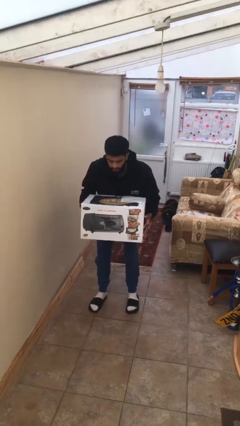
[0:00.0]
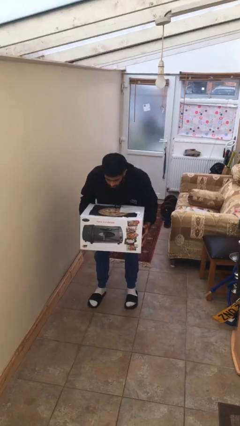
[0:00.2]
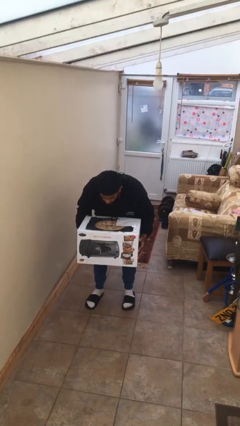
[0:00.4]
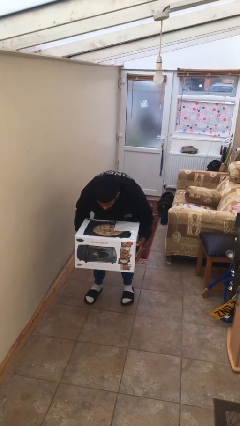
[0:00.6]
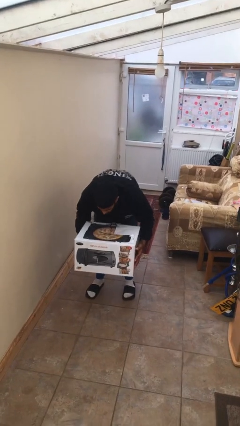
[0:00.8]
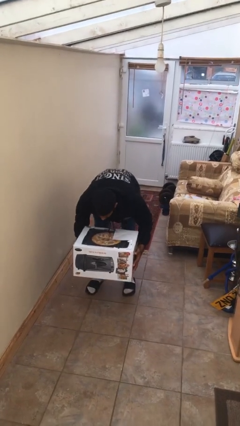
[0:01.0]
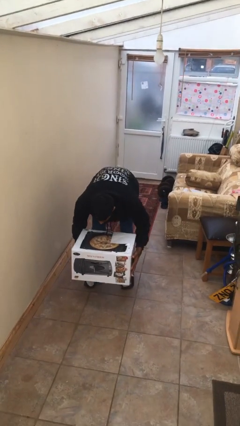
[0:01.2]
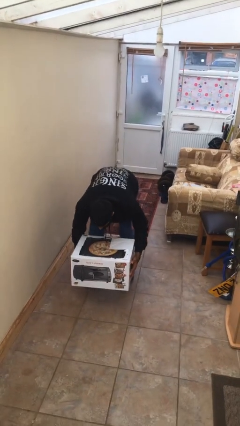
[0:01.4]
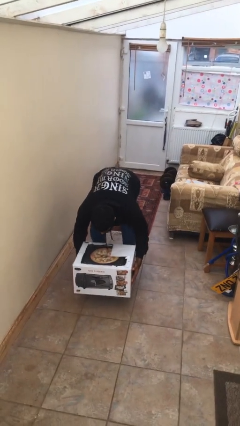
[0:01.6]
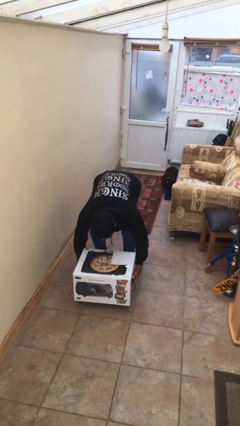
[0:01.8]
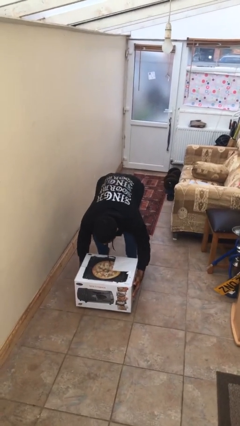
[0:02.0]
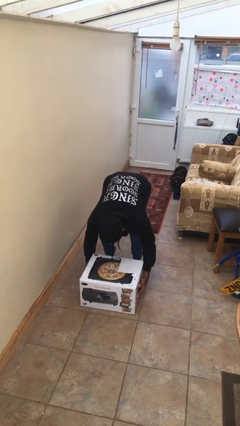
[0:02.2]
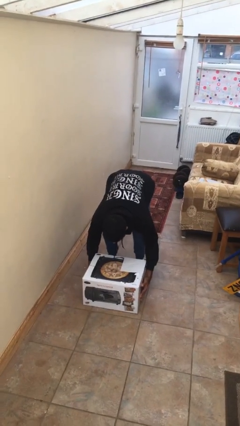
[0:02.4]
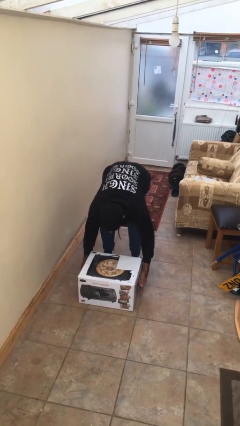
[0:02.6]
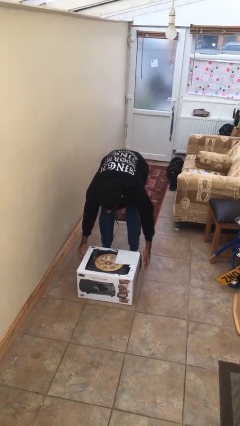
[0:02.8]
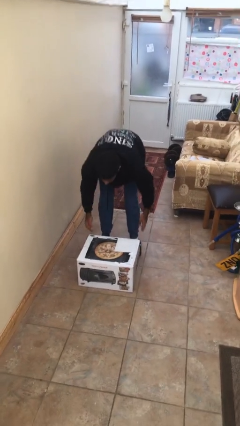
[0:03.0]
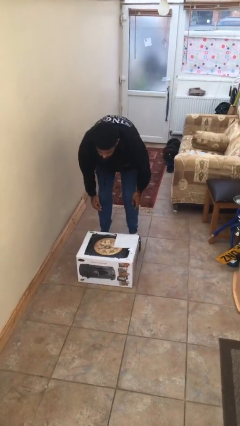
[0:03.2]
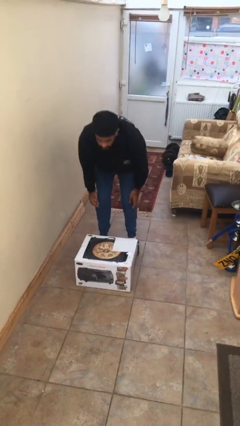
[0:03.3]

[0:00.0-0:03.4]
person puts down object on floor

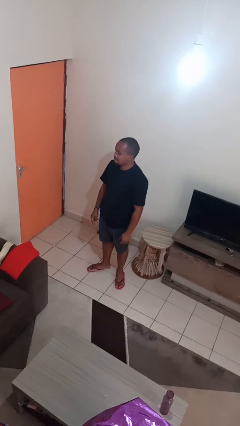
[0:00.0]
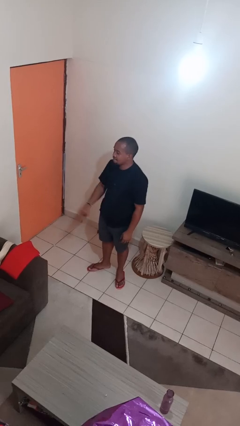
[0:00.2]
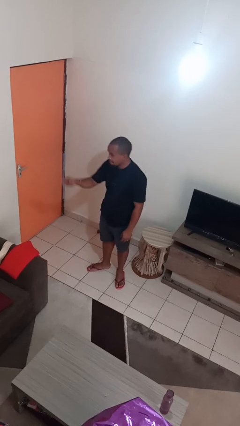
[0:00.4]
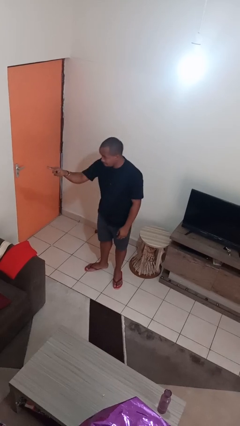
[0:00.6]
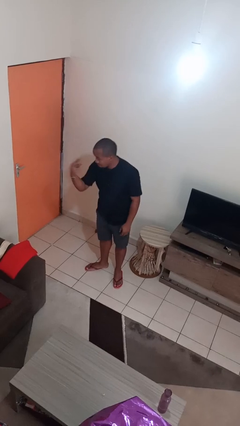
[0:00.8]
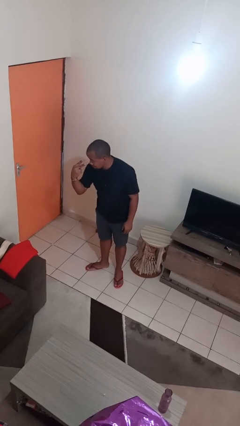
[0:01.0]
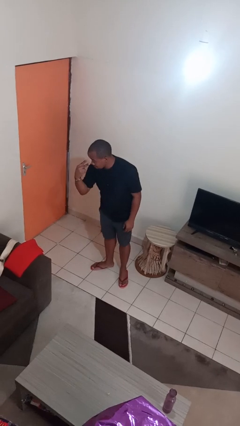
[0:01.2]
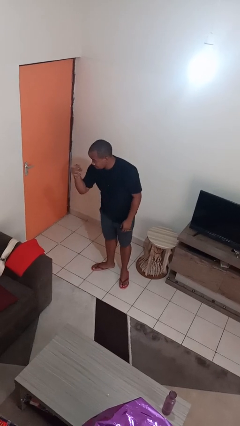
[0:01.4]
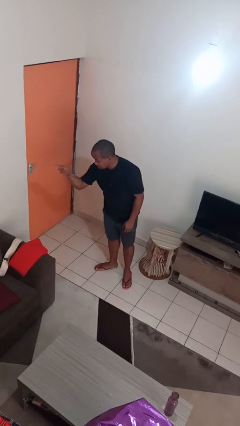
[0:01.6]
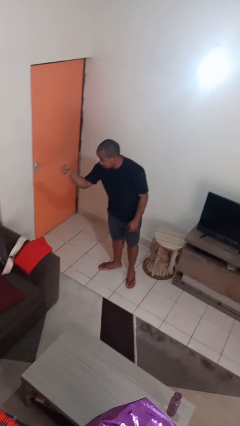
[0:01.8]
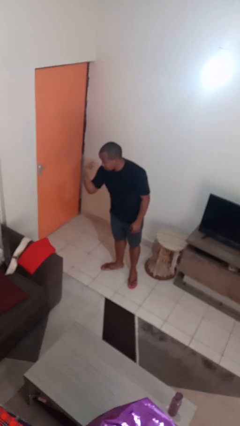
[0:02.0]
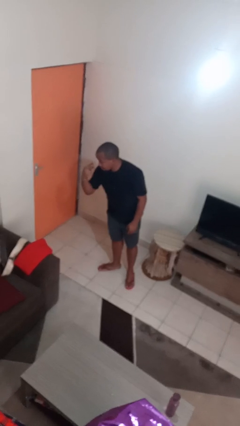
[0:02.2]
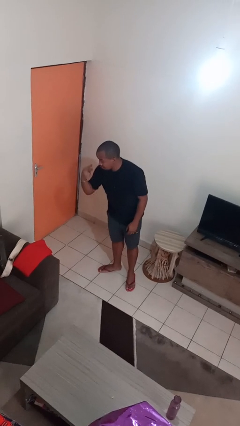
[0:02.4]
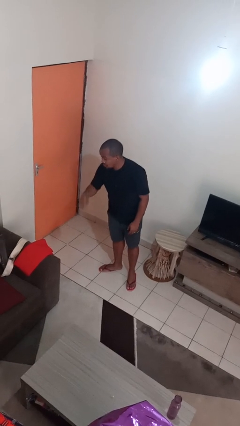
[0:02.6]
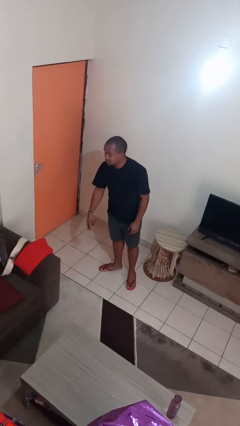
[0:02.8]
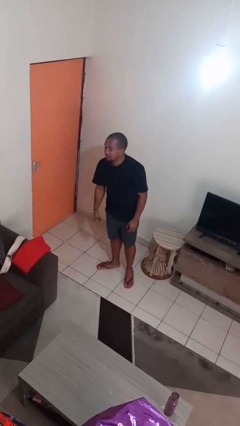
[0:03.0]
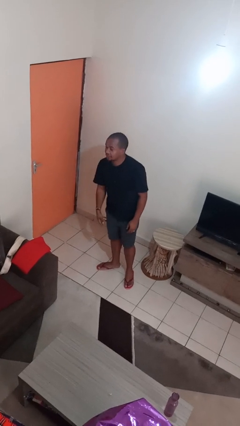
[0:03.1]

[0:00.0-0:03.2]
person gestures watch closely

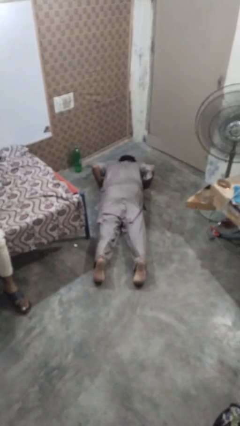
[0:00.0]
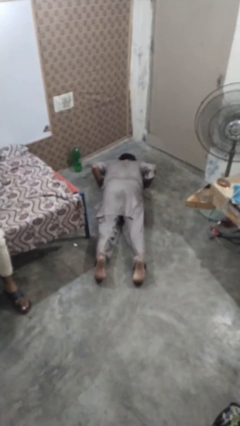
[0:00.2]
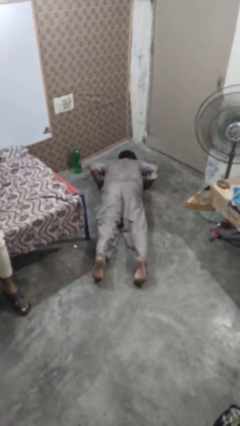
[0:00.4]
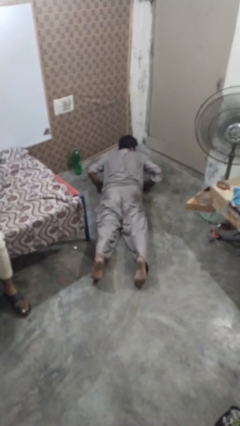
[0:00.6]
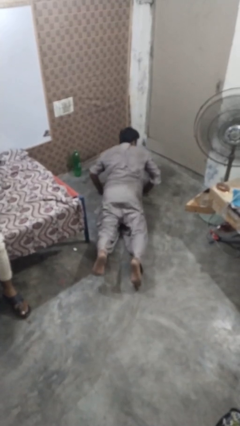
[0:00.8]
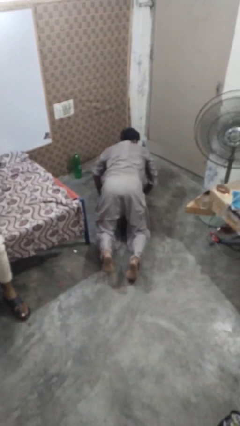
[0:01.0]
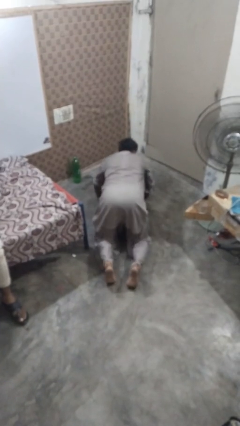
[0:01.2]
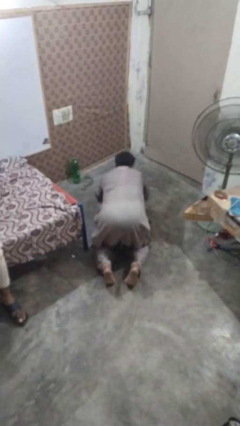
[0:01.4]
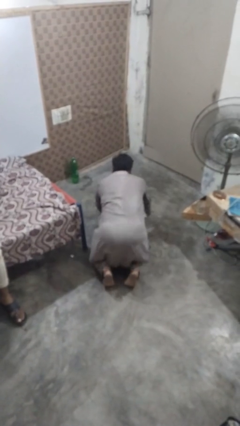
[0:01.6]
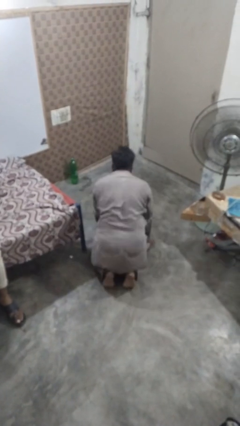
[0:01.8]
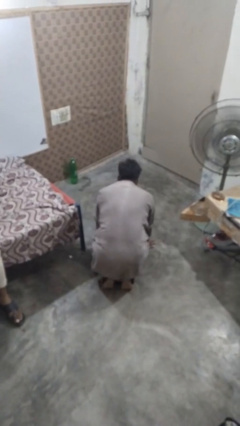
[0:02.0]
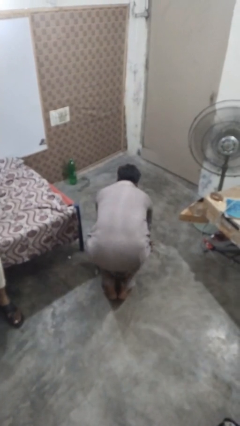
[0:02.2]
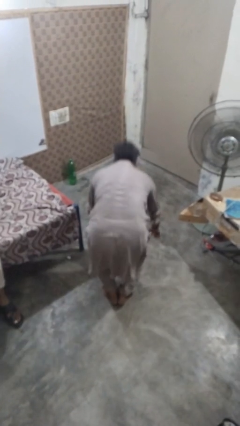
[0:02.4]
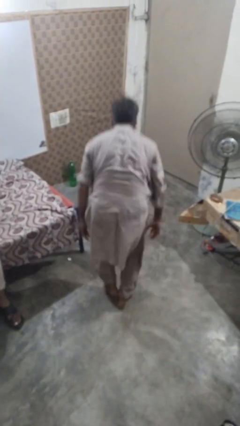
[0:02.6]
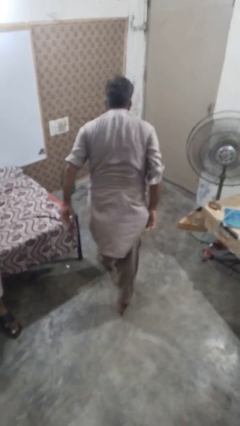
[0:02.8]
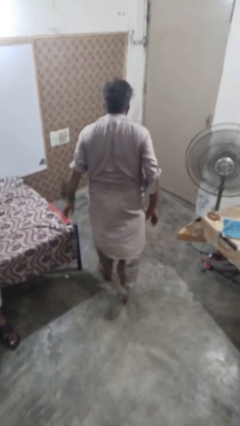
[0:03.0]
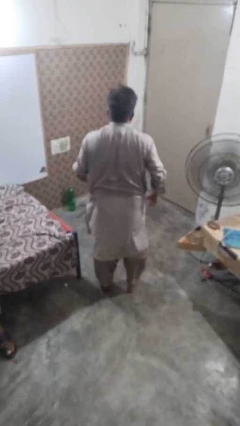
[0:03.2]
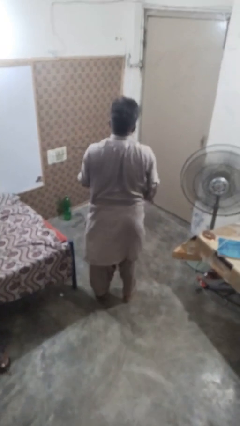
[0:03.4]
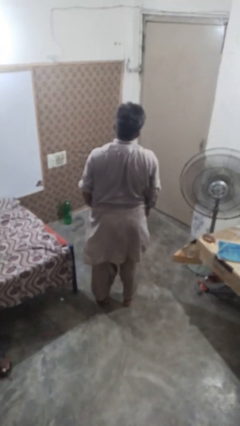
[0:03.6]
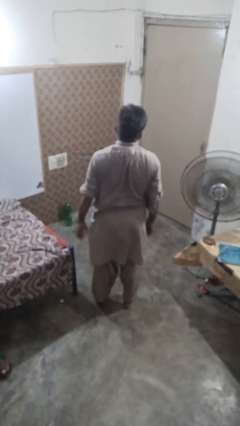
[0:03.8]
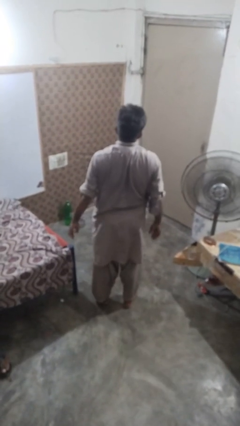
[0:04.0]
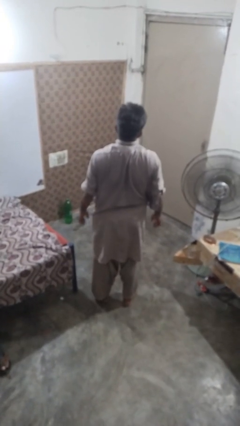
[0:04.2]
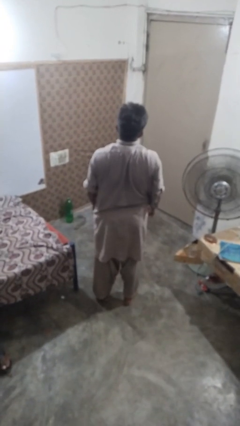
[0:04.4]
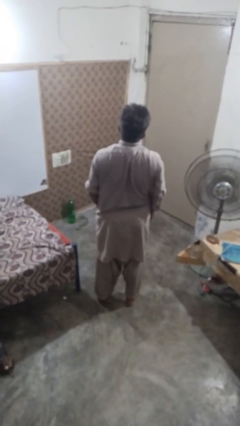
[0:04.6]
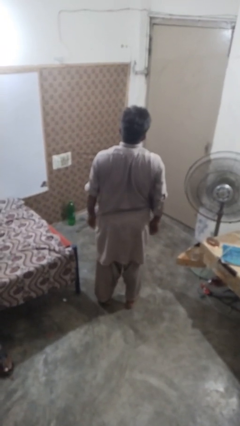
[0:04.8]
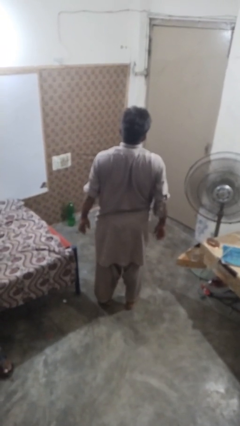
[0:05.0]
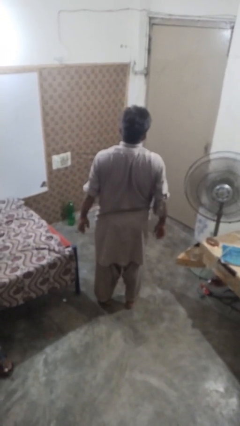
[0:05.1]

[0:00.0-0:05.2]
person stands up from floor

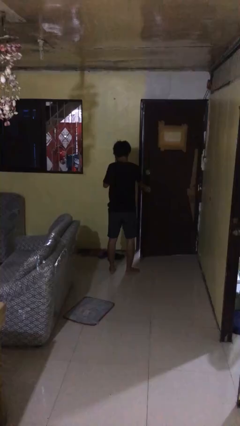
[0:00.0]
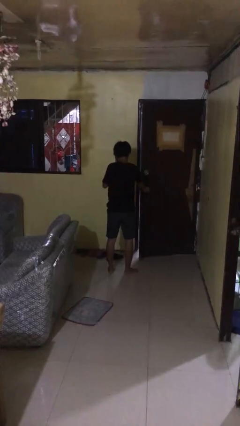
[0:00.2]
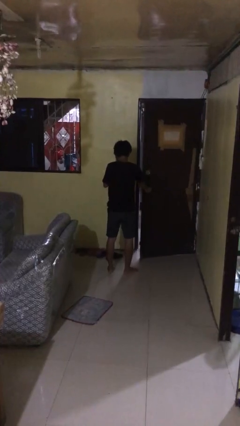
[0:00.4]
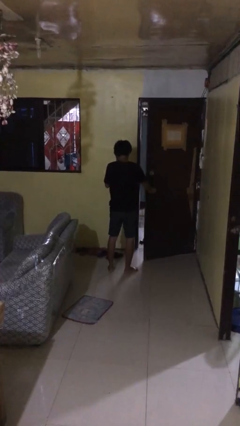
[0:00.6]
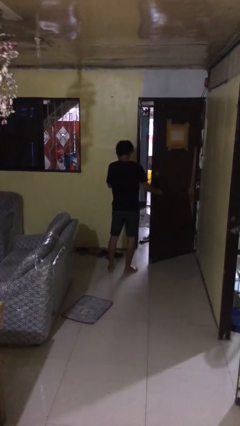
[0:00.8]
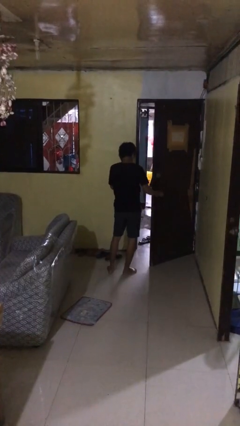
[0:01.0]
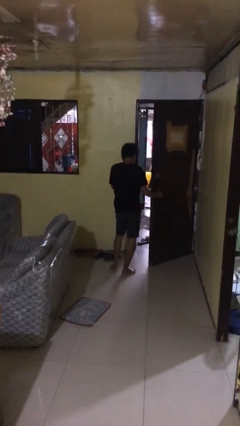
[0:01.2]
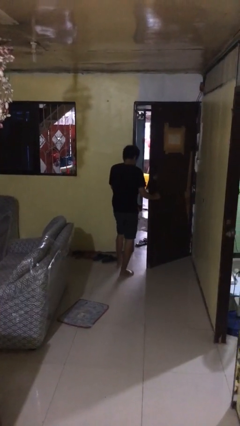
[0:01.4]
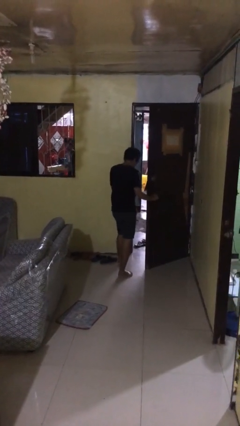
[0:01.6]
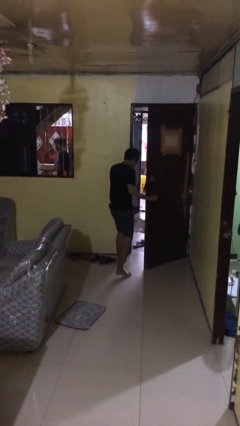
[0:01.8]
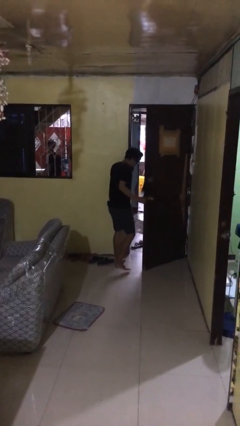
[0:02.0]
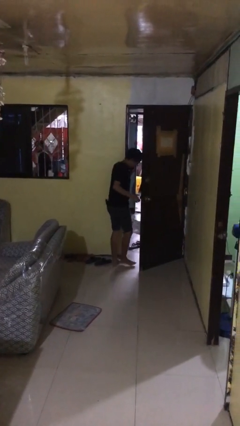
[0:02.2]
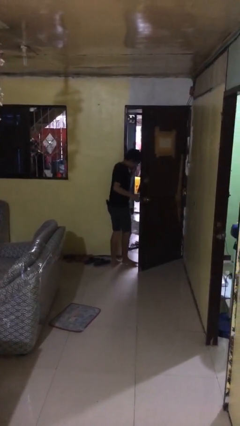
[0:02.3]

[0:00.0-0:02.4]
person opens facility door

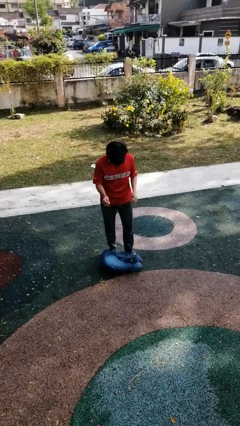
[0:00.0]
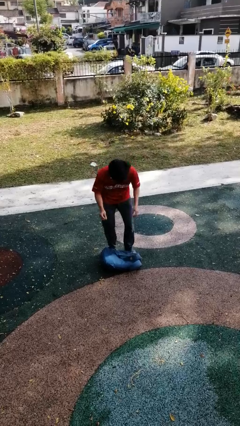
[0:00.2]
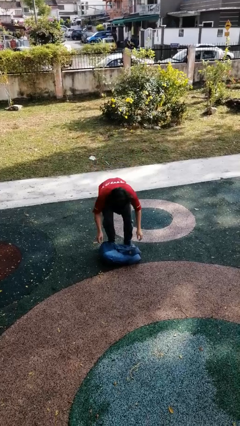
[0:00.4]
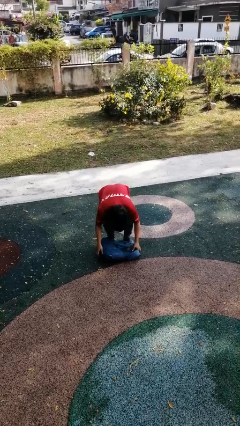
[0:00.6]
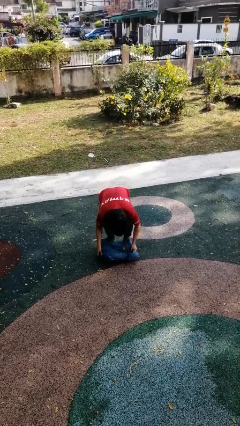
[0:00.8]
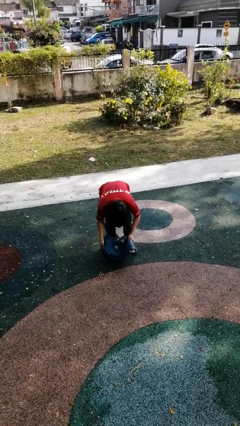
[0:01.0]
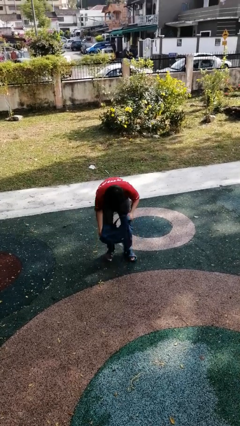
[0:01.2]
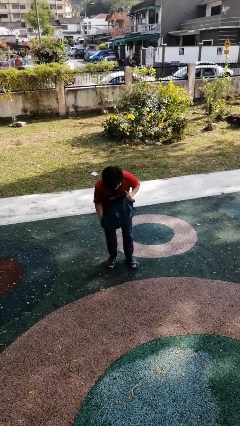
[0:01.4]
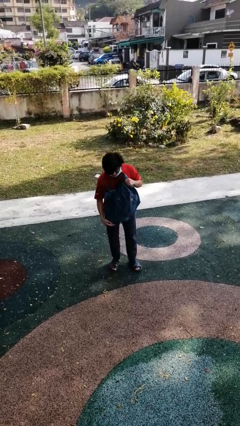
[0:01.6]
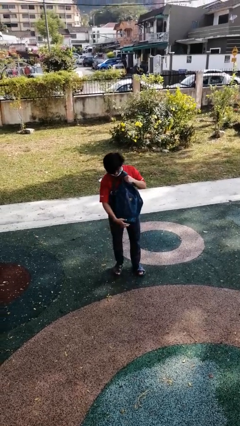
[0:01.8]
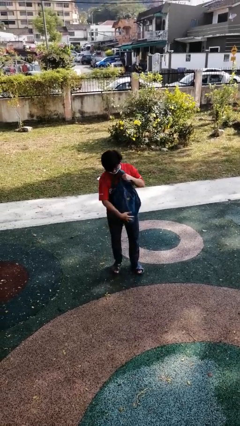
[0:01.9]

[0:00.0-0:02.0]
person picks up object from floor

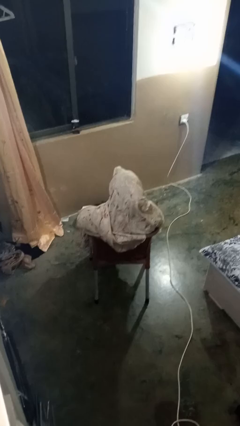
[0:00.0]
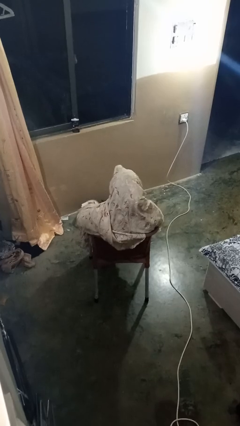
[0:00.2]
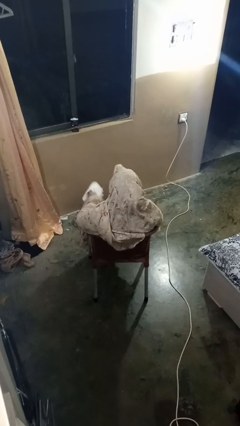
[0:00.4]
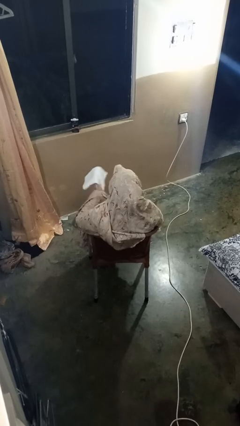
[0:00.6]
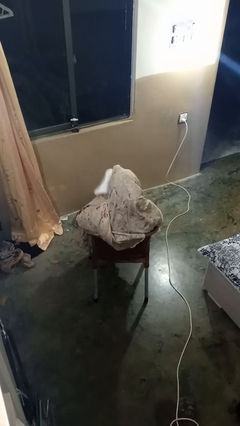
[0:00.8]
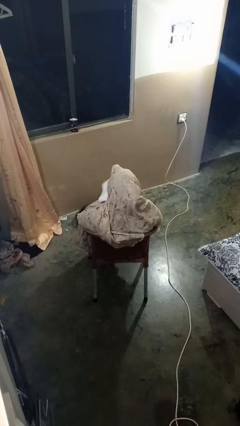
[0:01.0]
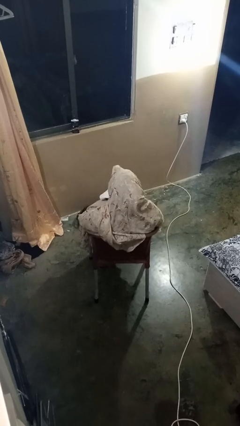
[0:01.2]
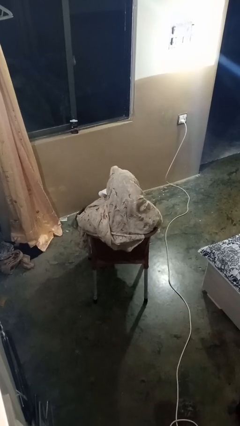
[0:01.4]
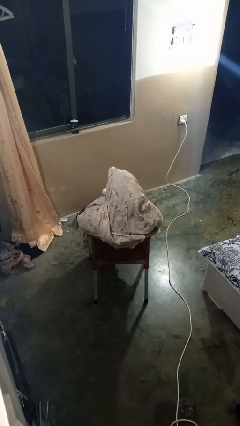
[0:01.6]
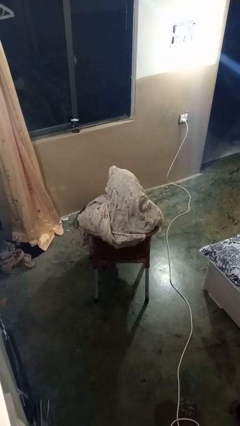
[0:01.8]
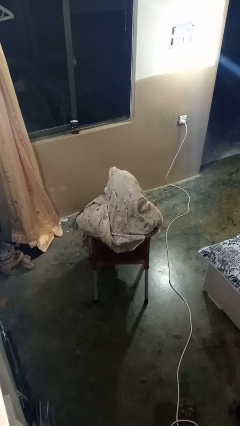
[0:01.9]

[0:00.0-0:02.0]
person wipes mouth with napkin
